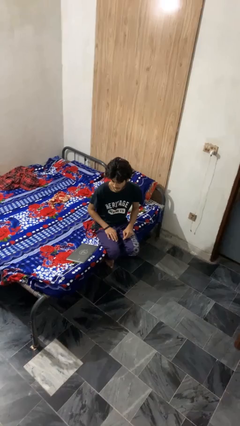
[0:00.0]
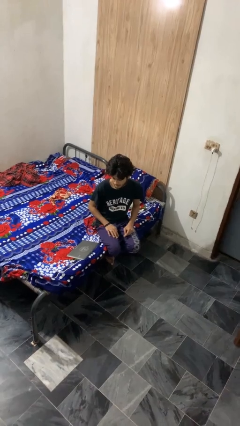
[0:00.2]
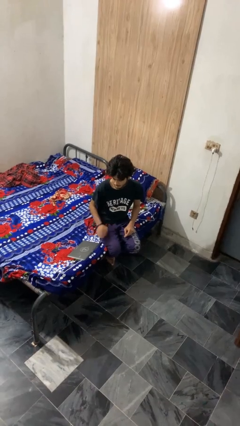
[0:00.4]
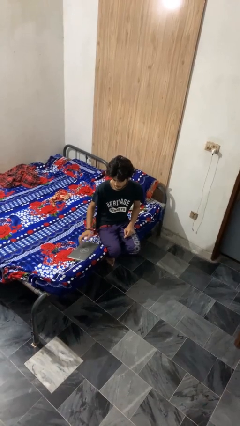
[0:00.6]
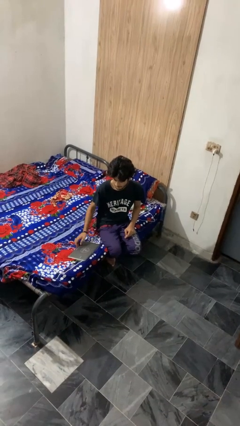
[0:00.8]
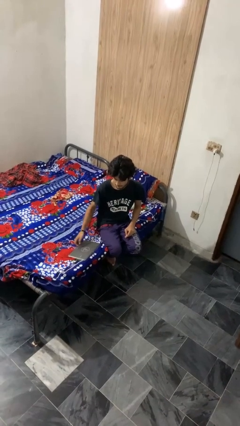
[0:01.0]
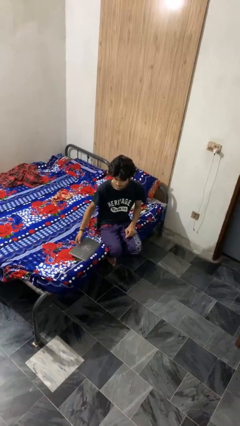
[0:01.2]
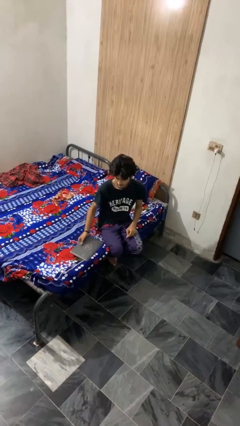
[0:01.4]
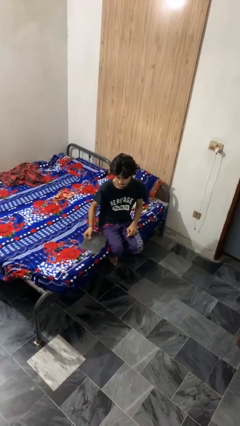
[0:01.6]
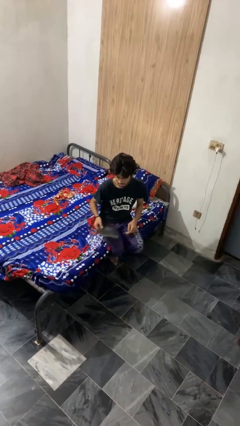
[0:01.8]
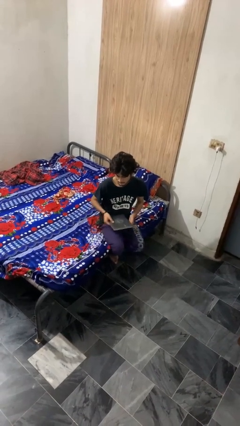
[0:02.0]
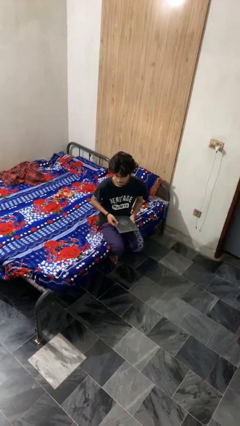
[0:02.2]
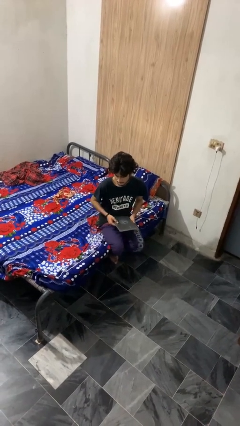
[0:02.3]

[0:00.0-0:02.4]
person picks up object from bed

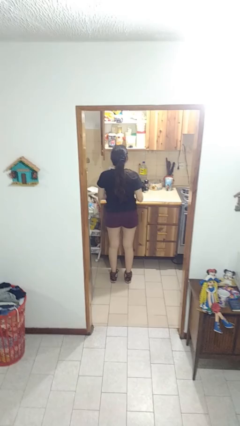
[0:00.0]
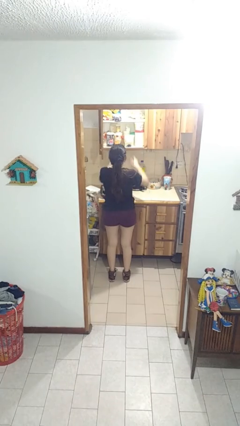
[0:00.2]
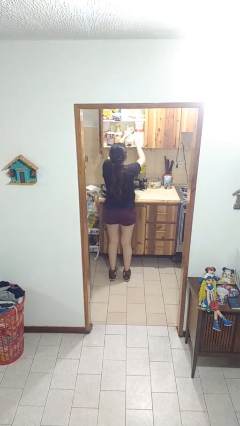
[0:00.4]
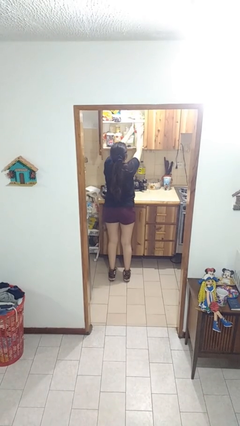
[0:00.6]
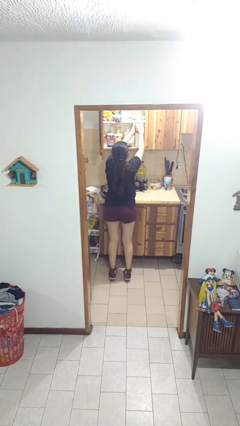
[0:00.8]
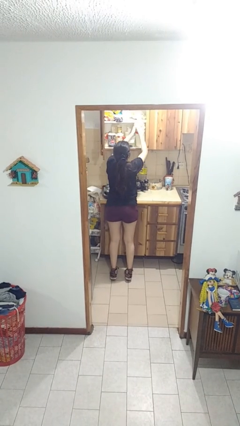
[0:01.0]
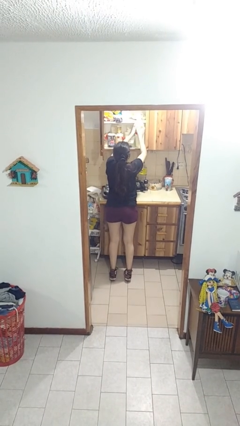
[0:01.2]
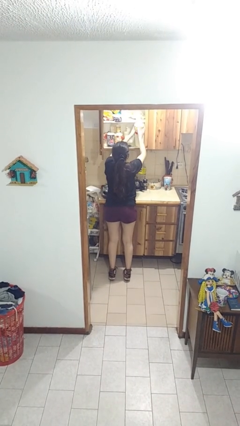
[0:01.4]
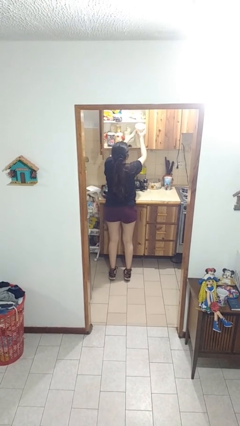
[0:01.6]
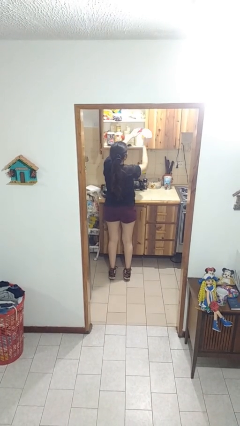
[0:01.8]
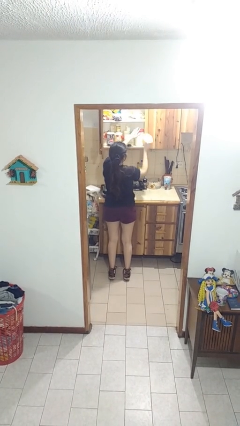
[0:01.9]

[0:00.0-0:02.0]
person takes object from cabinet

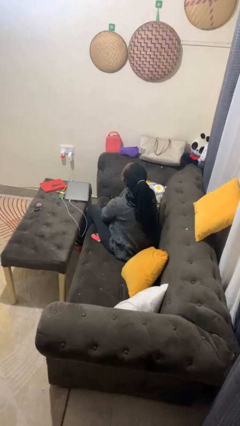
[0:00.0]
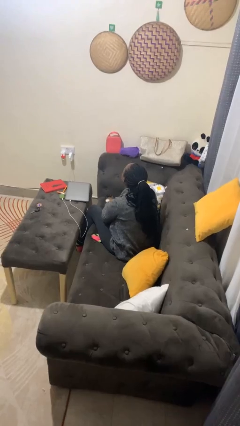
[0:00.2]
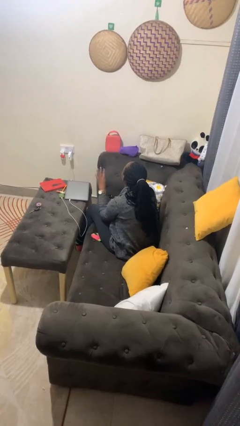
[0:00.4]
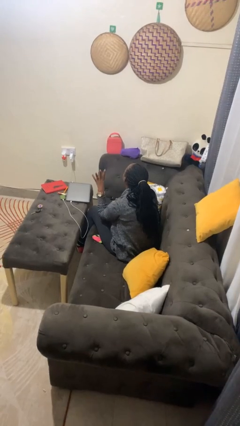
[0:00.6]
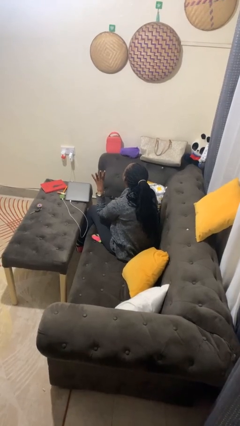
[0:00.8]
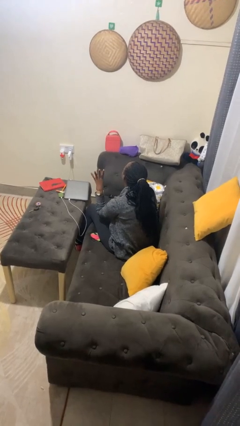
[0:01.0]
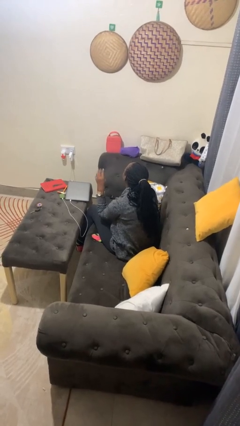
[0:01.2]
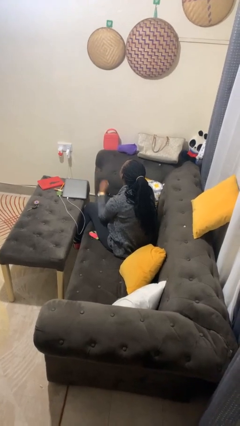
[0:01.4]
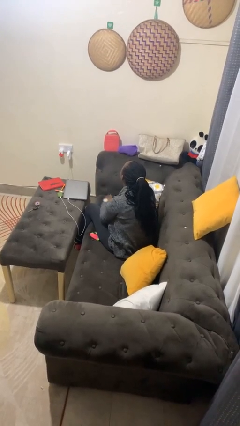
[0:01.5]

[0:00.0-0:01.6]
person gestures number four

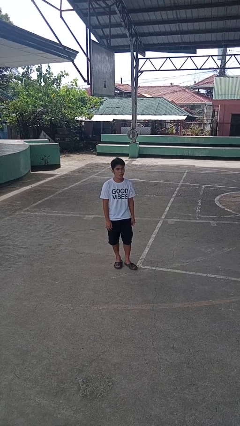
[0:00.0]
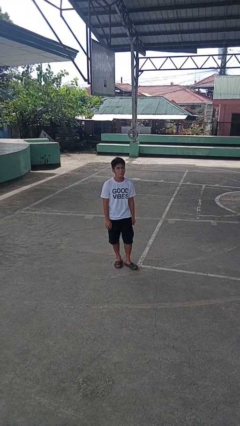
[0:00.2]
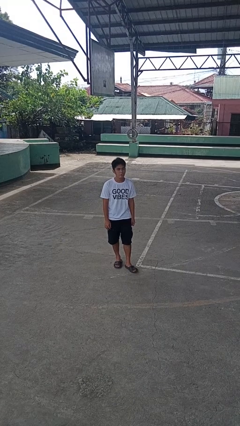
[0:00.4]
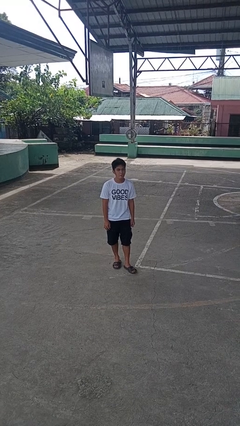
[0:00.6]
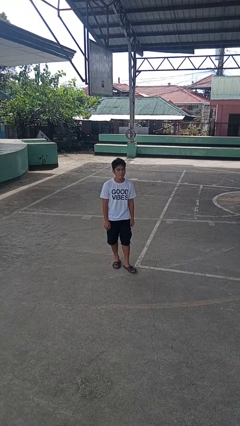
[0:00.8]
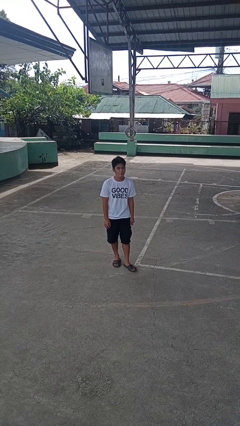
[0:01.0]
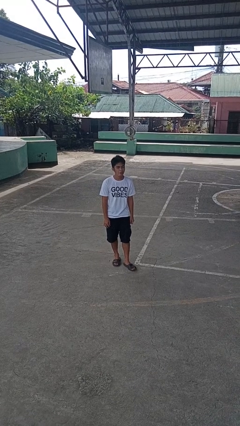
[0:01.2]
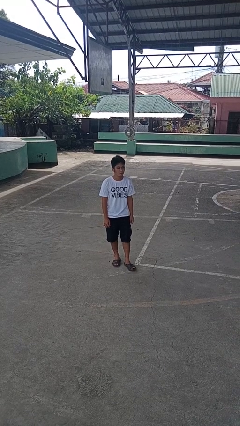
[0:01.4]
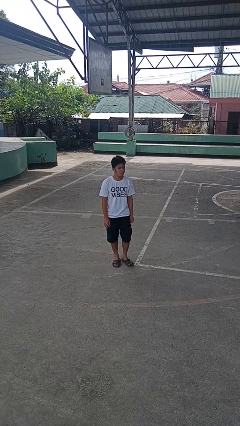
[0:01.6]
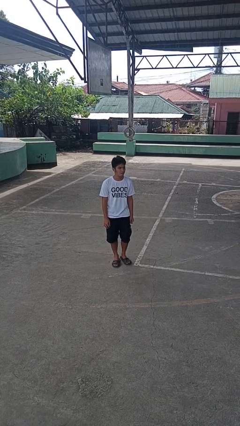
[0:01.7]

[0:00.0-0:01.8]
person sticks out tongue

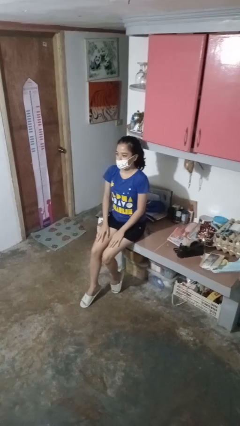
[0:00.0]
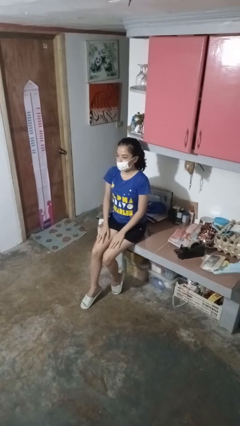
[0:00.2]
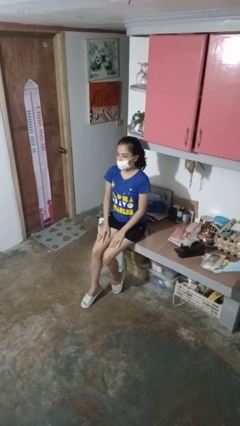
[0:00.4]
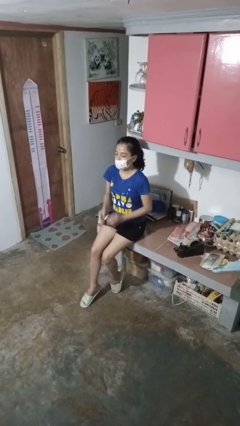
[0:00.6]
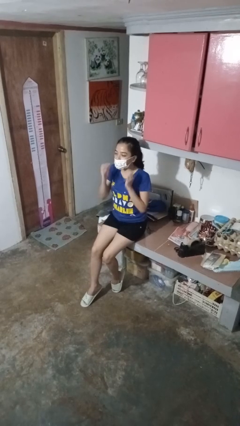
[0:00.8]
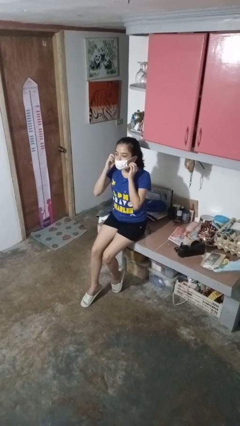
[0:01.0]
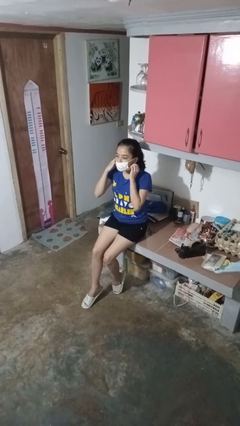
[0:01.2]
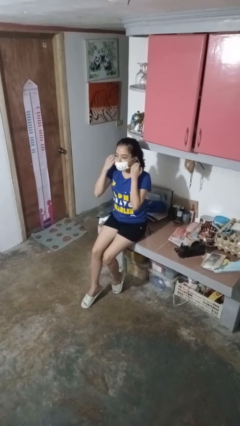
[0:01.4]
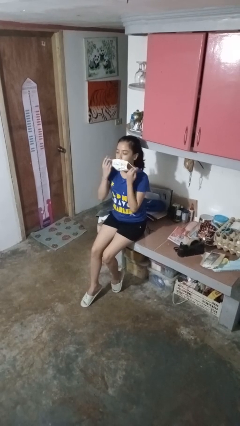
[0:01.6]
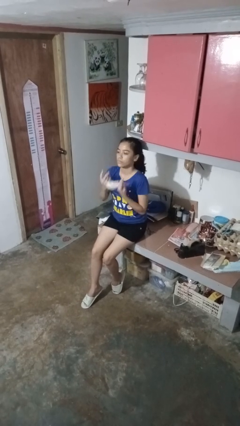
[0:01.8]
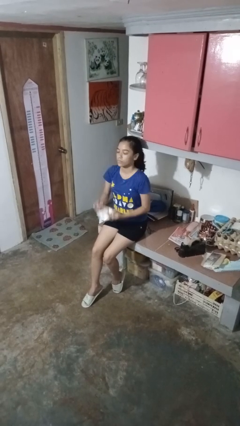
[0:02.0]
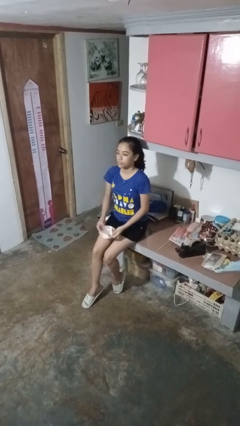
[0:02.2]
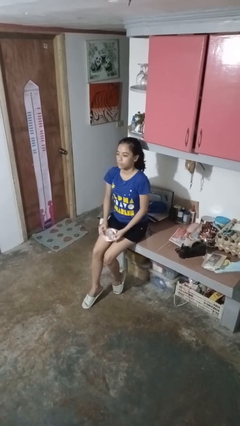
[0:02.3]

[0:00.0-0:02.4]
person takes off facemask

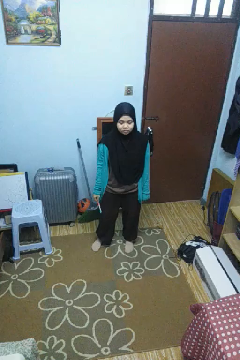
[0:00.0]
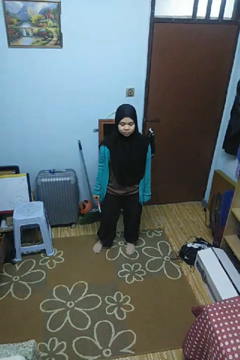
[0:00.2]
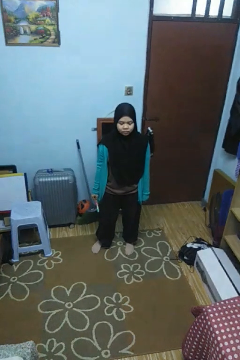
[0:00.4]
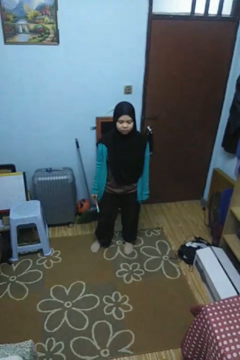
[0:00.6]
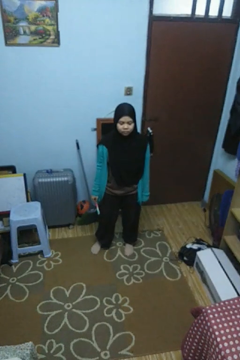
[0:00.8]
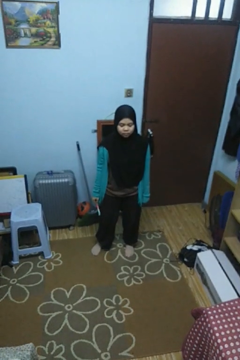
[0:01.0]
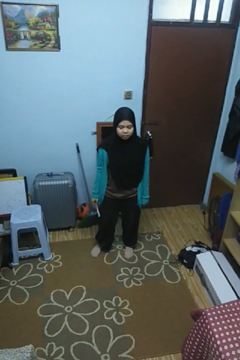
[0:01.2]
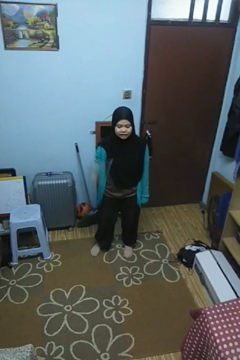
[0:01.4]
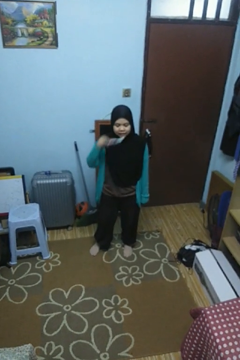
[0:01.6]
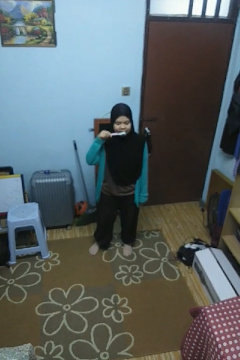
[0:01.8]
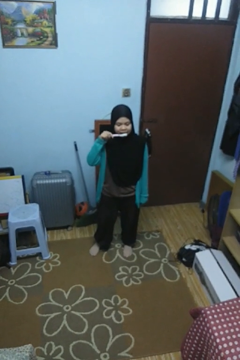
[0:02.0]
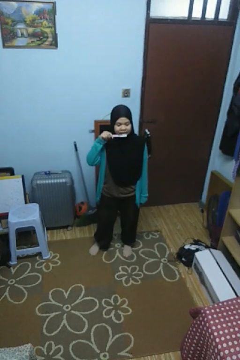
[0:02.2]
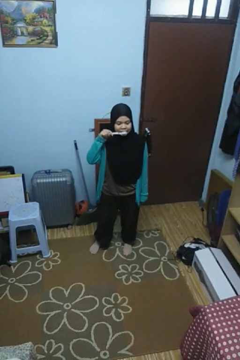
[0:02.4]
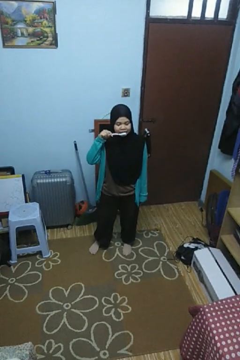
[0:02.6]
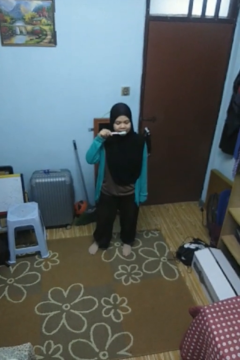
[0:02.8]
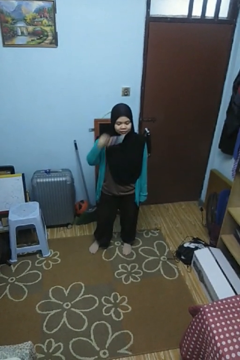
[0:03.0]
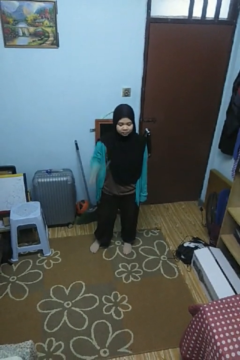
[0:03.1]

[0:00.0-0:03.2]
person brushes teeth

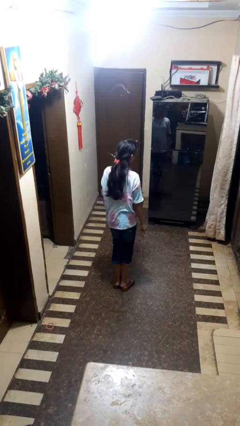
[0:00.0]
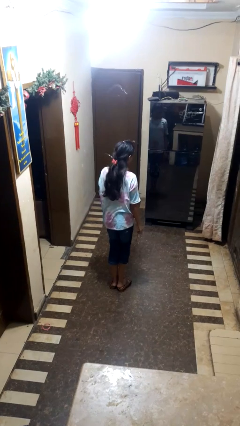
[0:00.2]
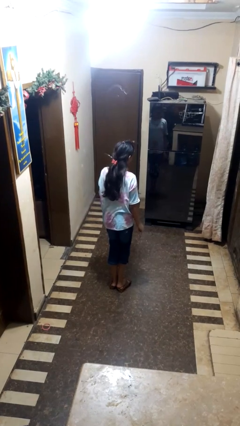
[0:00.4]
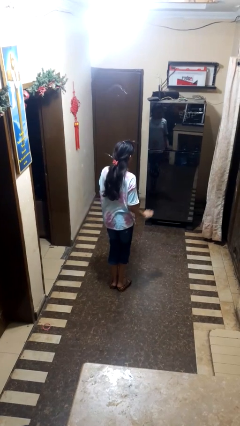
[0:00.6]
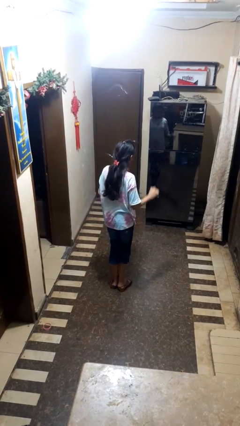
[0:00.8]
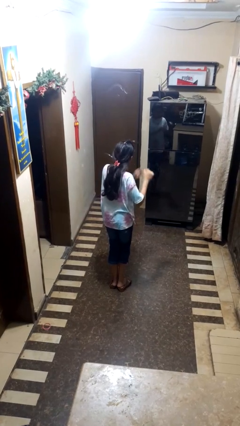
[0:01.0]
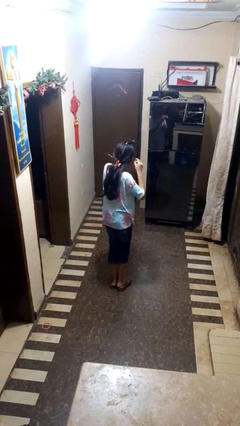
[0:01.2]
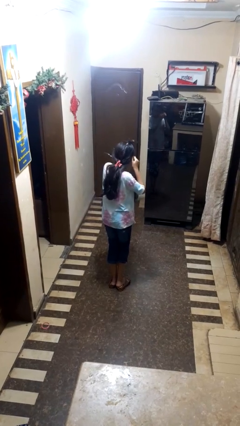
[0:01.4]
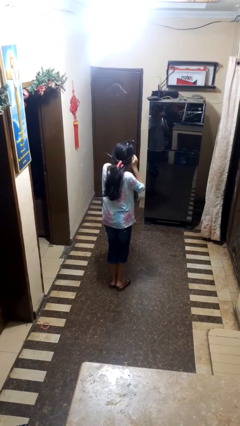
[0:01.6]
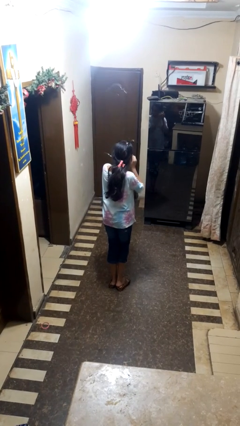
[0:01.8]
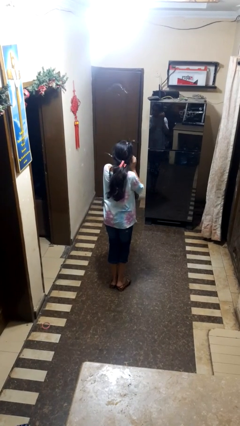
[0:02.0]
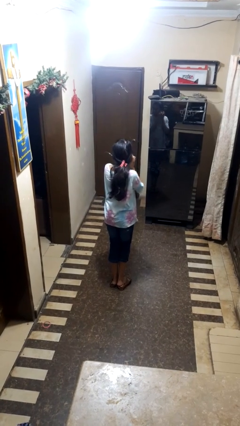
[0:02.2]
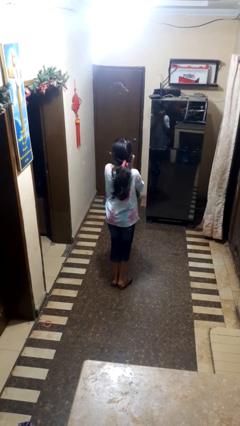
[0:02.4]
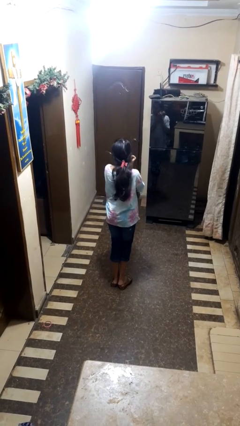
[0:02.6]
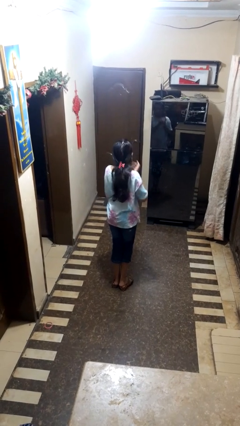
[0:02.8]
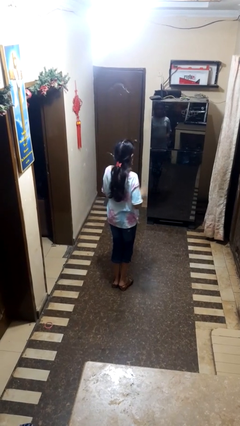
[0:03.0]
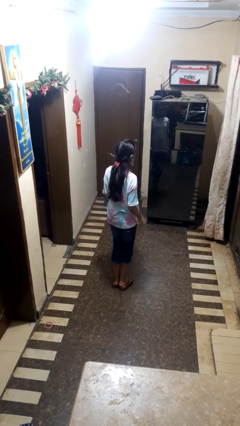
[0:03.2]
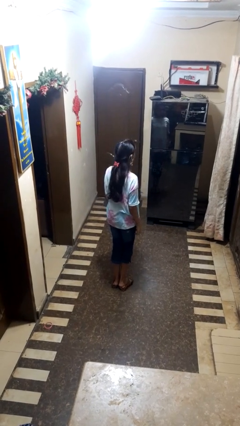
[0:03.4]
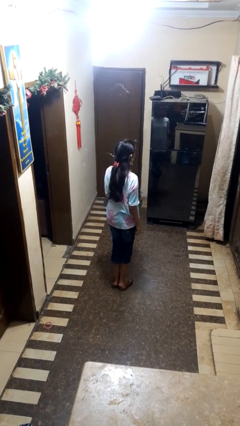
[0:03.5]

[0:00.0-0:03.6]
person puts on earrings

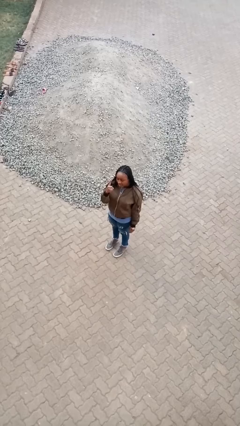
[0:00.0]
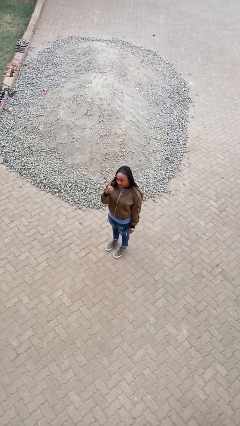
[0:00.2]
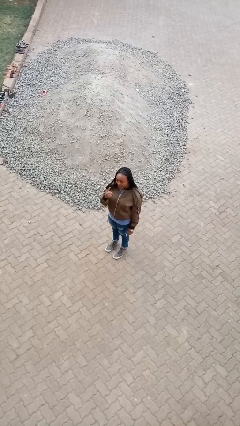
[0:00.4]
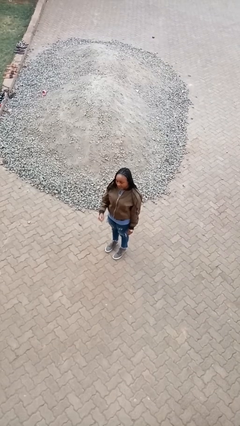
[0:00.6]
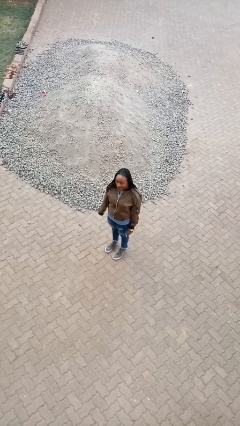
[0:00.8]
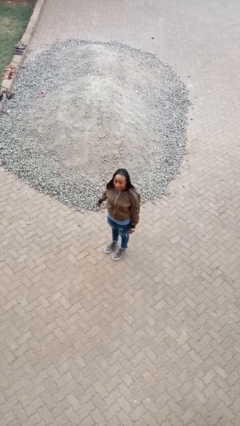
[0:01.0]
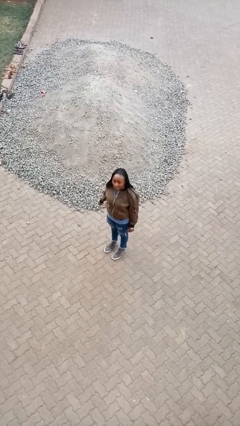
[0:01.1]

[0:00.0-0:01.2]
person gestures number one
